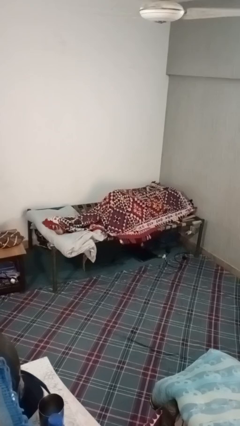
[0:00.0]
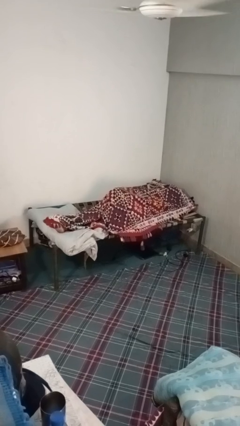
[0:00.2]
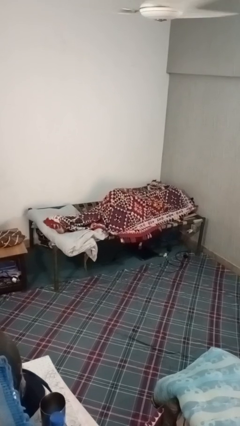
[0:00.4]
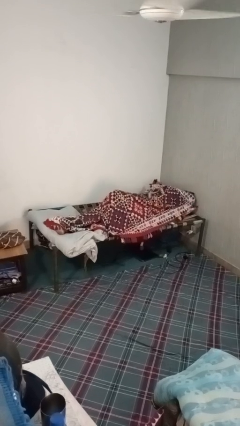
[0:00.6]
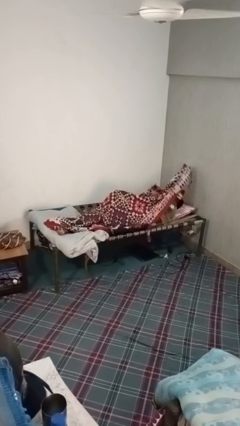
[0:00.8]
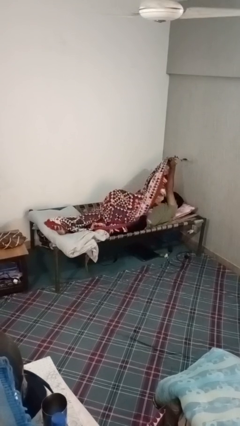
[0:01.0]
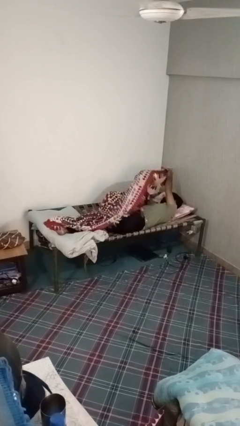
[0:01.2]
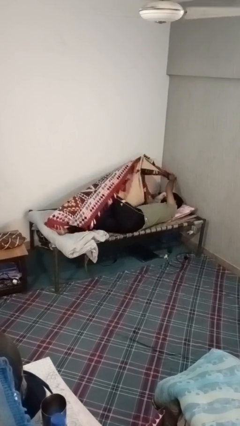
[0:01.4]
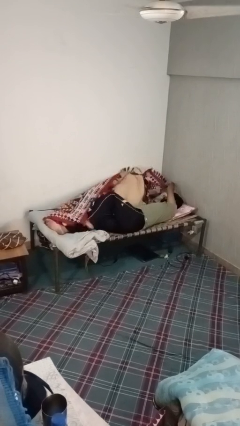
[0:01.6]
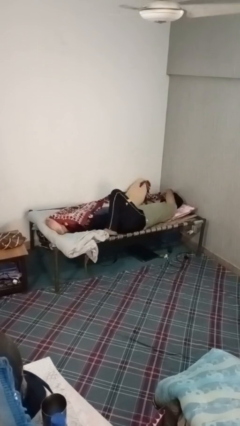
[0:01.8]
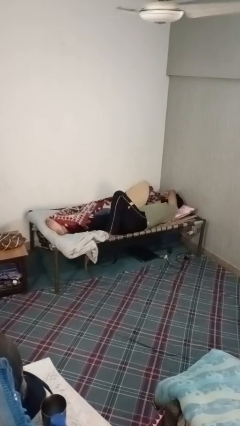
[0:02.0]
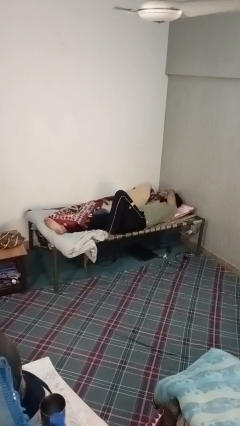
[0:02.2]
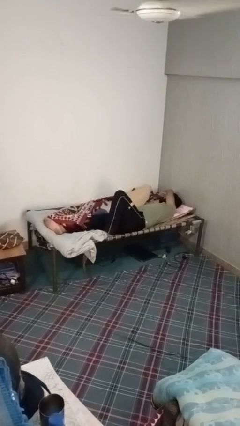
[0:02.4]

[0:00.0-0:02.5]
person uncovers with blanket

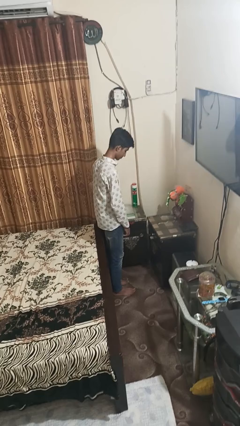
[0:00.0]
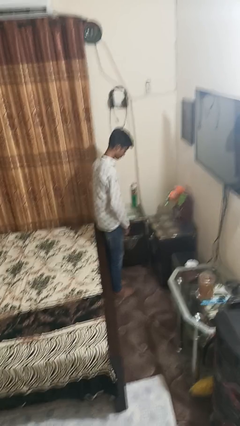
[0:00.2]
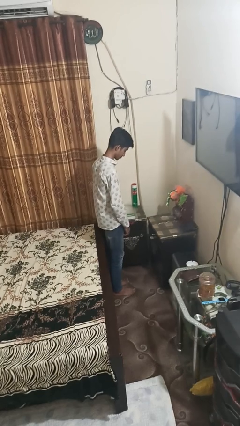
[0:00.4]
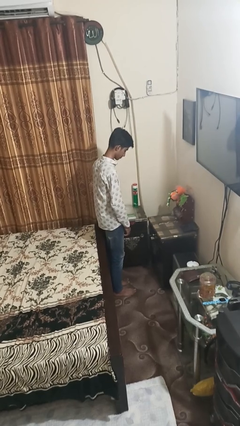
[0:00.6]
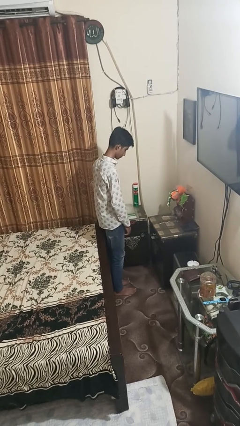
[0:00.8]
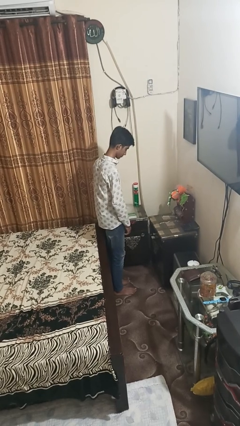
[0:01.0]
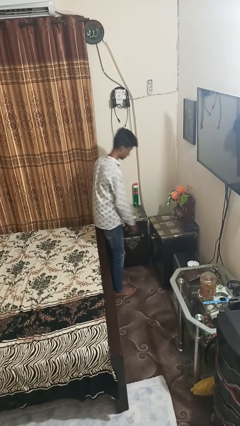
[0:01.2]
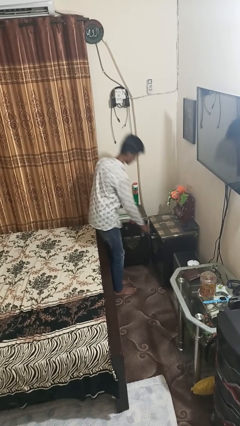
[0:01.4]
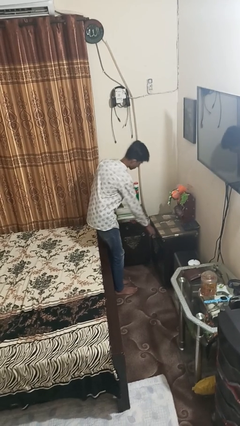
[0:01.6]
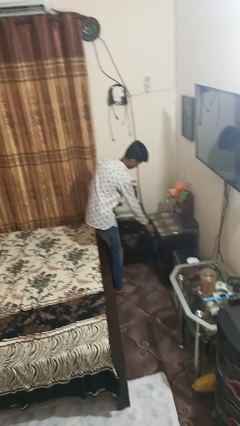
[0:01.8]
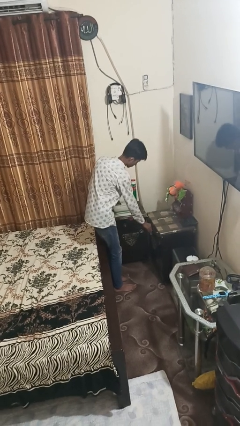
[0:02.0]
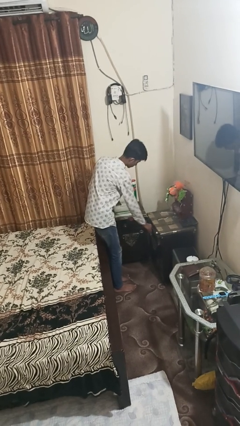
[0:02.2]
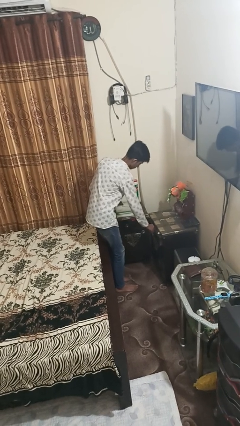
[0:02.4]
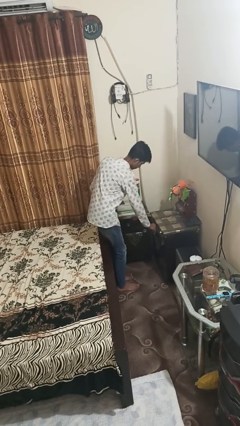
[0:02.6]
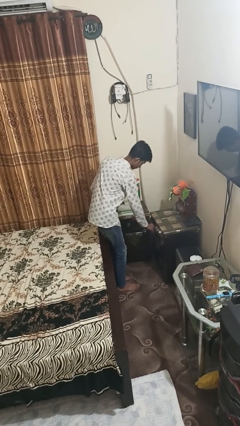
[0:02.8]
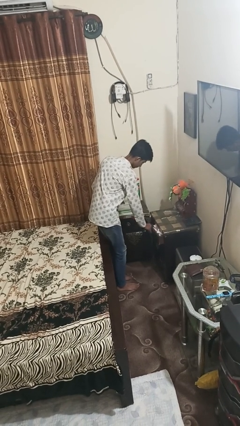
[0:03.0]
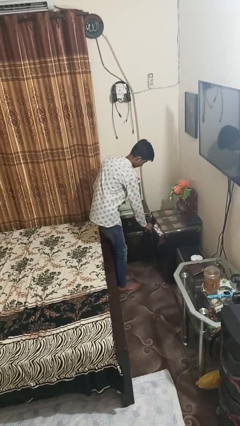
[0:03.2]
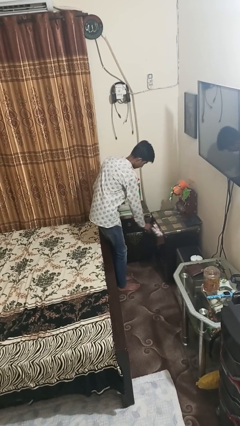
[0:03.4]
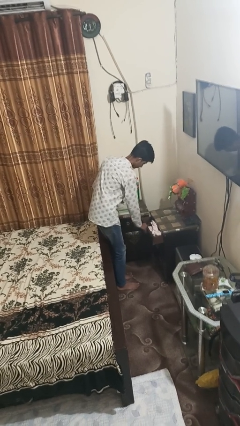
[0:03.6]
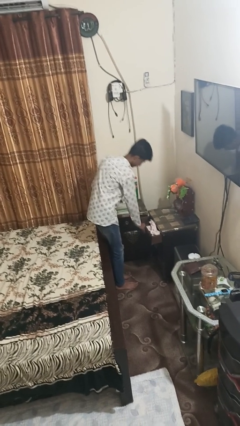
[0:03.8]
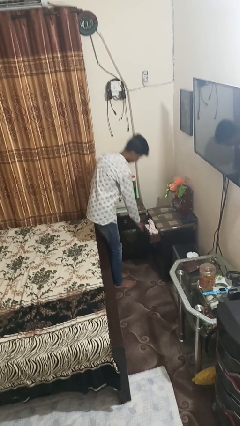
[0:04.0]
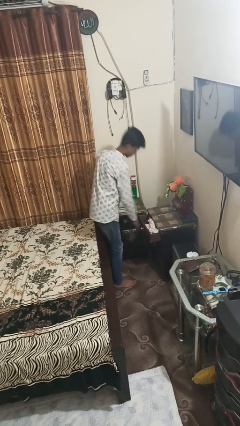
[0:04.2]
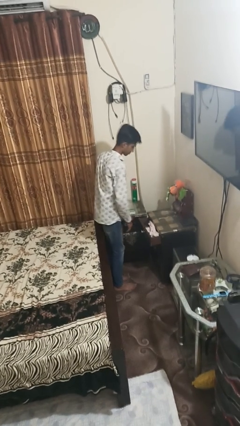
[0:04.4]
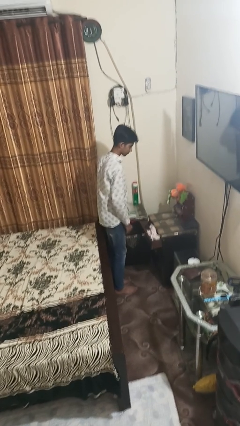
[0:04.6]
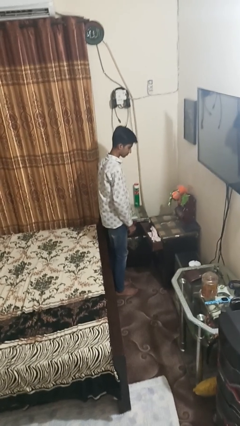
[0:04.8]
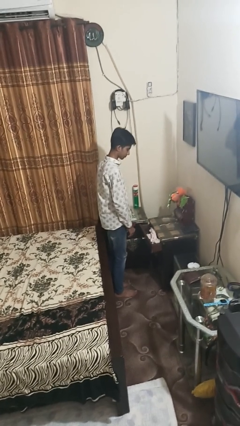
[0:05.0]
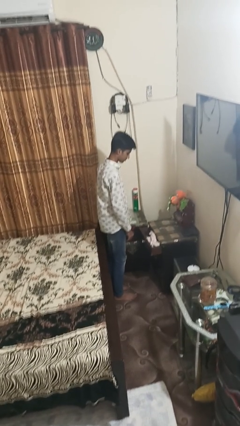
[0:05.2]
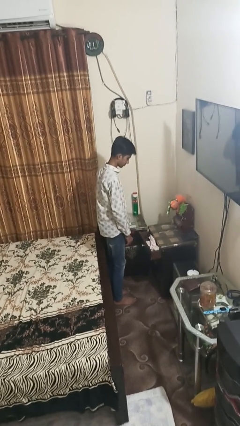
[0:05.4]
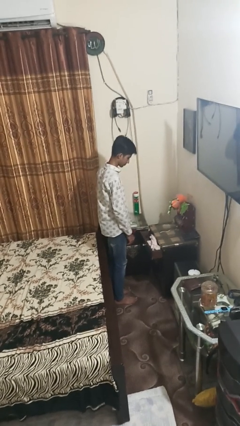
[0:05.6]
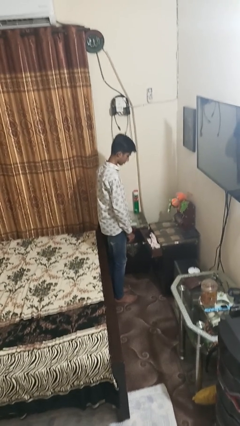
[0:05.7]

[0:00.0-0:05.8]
person opens dresser drawer

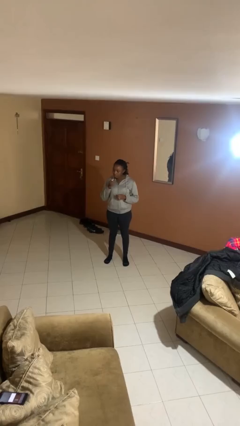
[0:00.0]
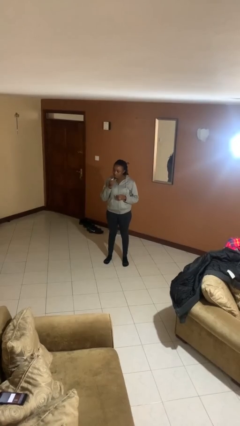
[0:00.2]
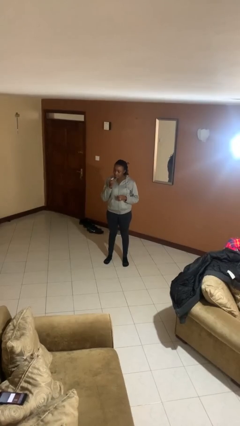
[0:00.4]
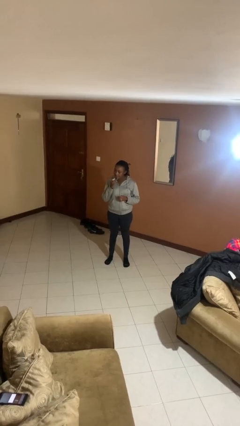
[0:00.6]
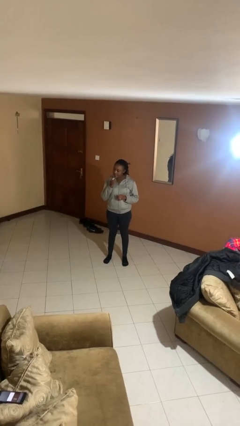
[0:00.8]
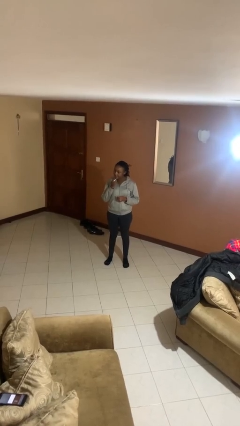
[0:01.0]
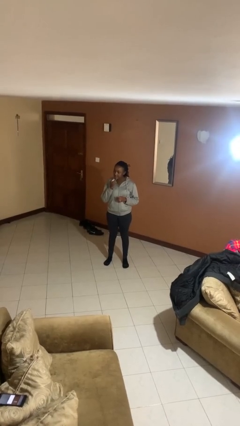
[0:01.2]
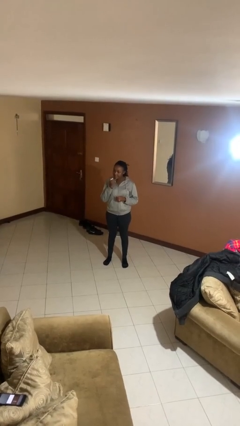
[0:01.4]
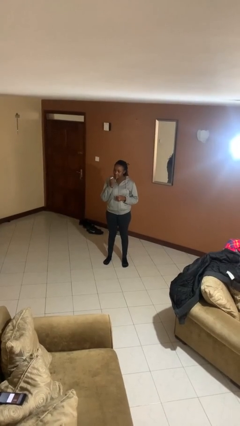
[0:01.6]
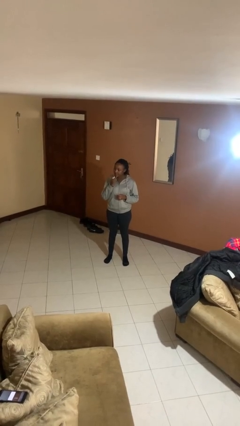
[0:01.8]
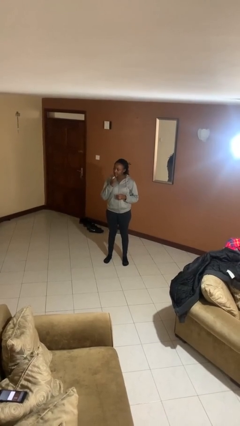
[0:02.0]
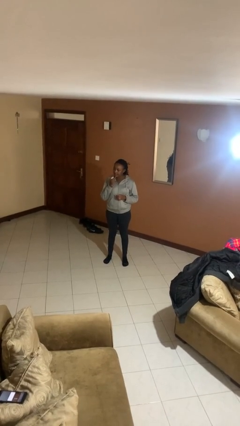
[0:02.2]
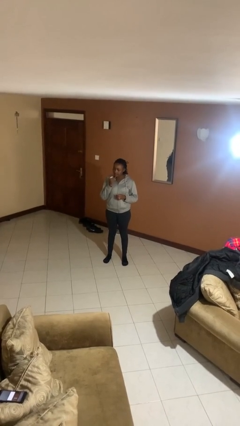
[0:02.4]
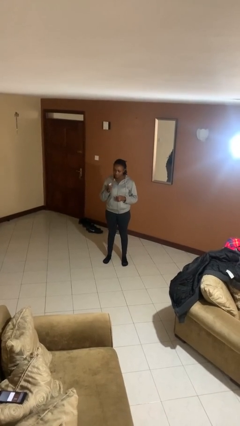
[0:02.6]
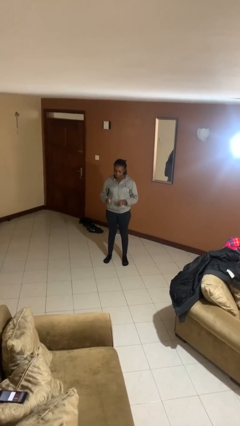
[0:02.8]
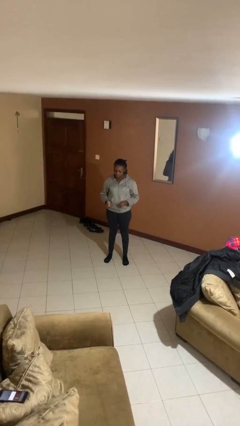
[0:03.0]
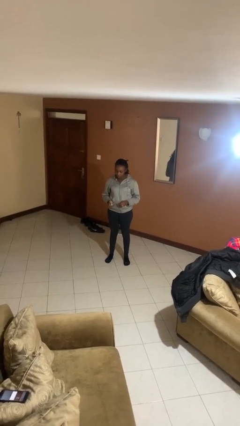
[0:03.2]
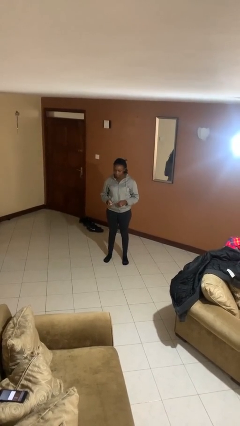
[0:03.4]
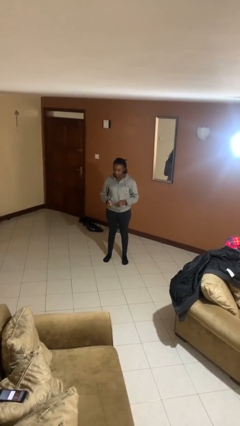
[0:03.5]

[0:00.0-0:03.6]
person applies lip makeup

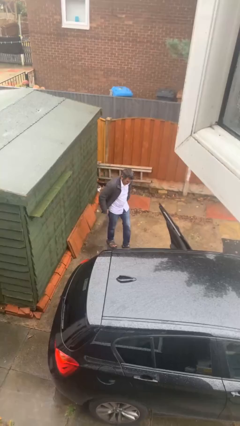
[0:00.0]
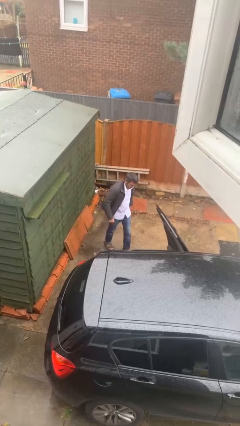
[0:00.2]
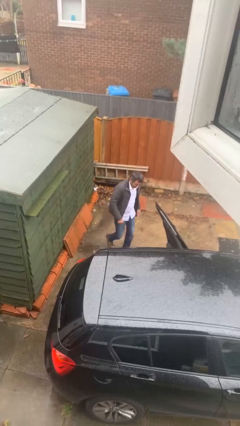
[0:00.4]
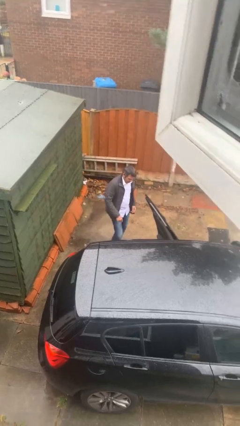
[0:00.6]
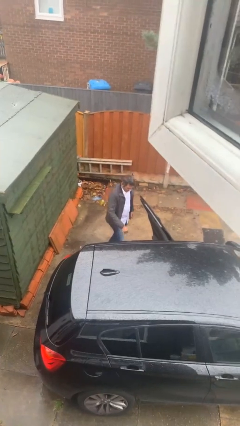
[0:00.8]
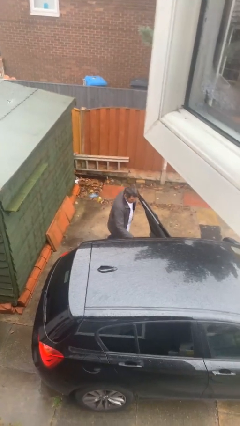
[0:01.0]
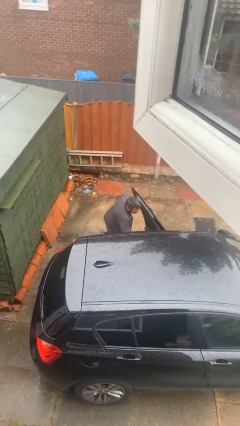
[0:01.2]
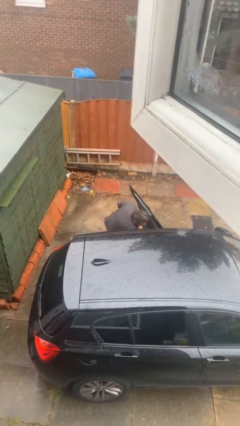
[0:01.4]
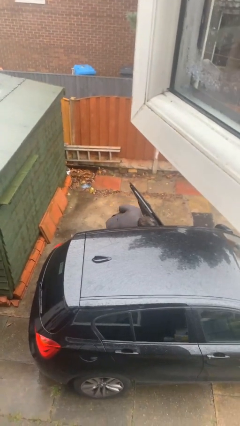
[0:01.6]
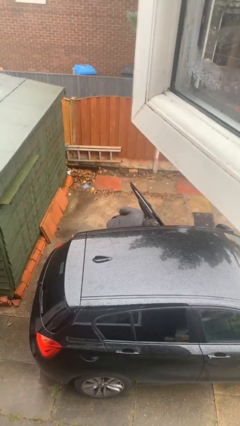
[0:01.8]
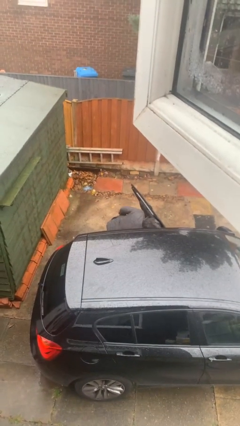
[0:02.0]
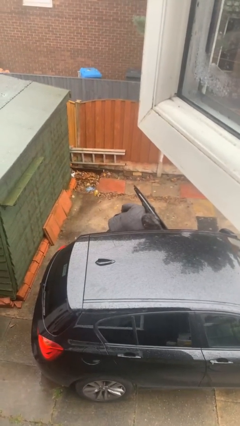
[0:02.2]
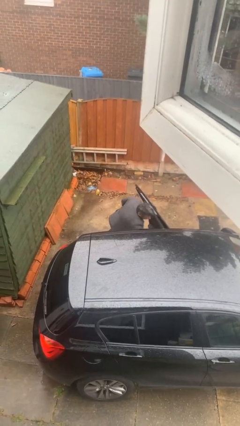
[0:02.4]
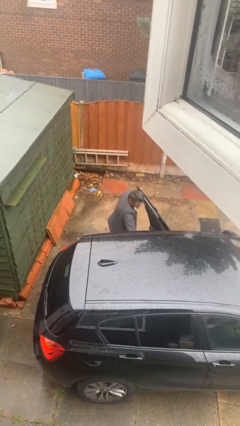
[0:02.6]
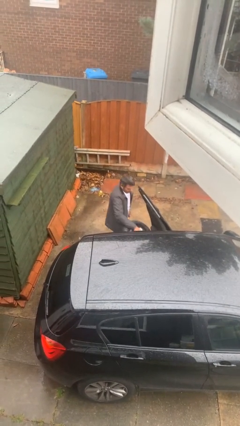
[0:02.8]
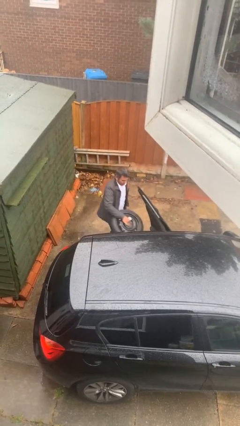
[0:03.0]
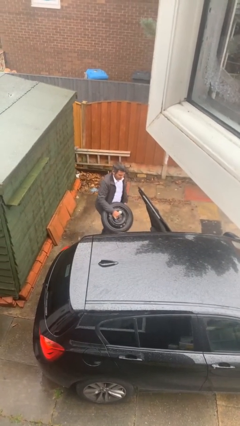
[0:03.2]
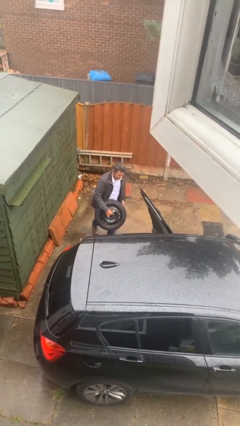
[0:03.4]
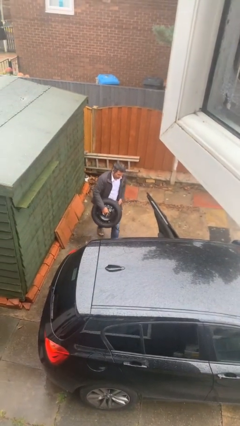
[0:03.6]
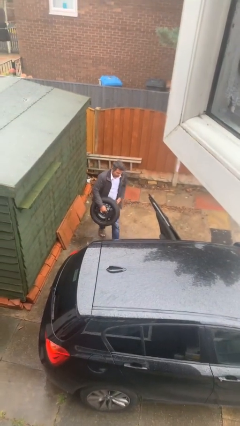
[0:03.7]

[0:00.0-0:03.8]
person unloads car

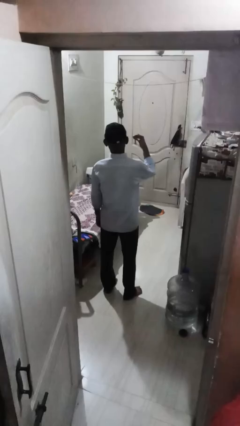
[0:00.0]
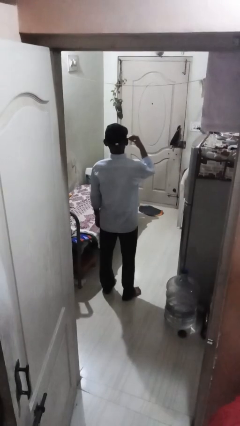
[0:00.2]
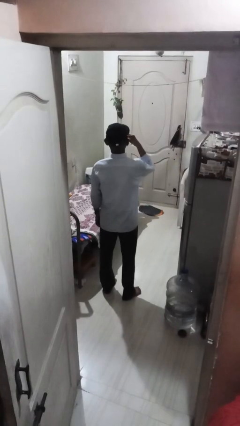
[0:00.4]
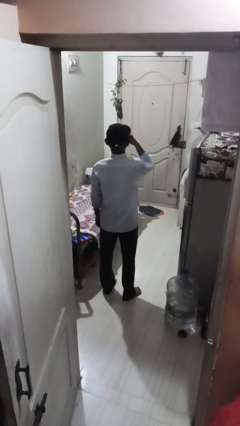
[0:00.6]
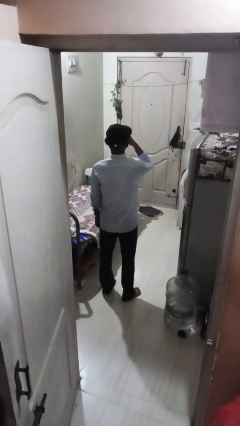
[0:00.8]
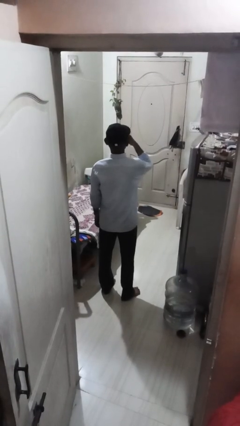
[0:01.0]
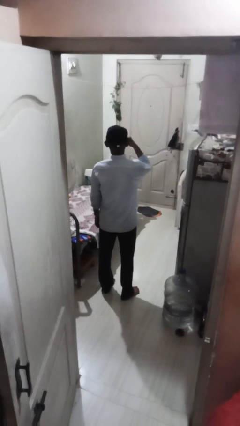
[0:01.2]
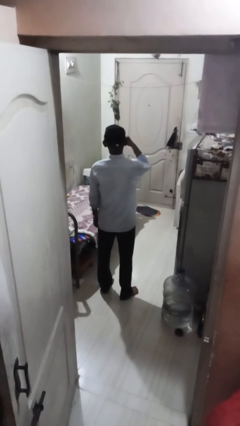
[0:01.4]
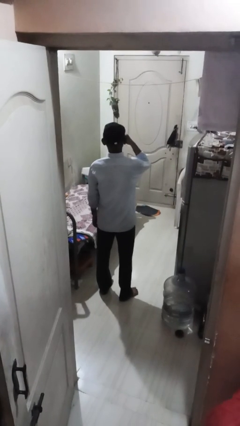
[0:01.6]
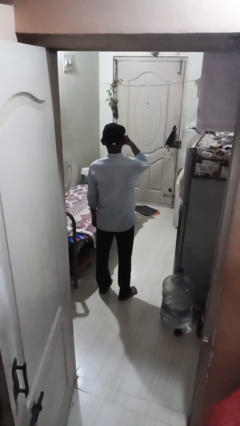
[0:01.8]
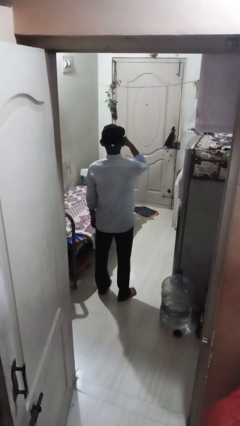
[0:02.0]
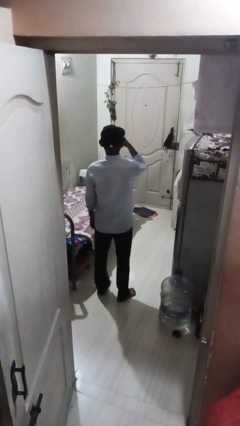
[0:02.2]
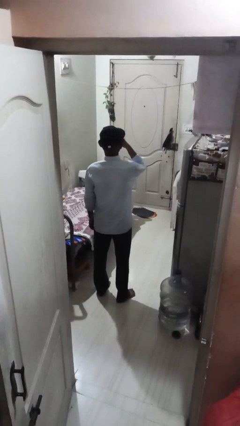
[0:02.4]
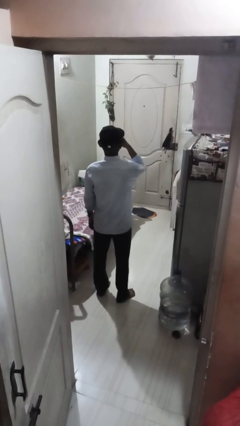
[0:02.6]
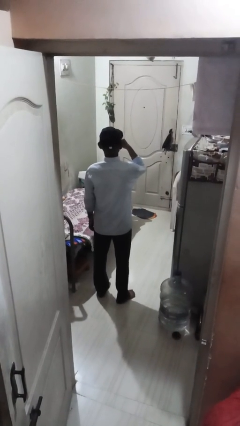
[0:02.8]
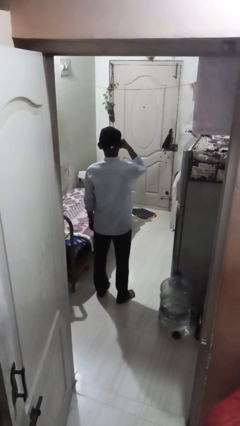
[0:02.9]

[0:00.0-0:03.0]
person flosses
